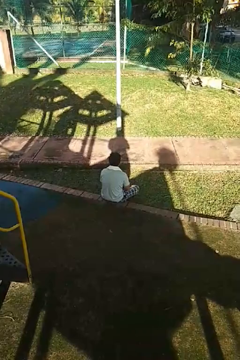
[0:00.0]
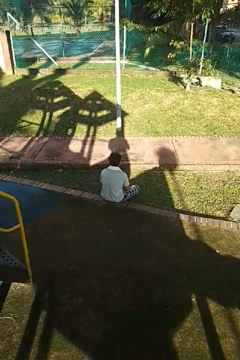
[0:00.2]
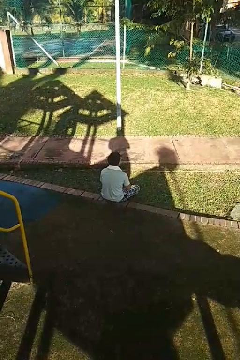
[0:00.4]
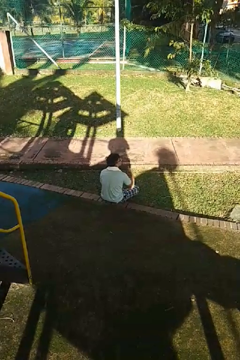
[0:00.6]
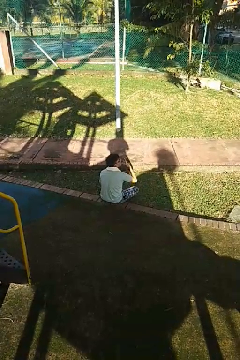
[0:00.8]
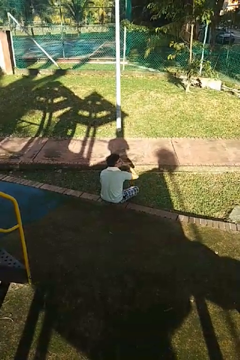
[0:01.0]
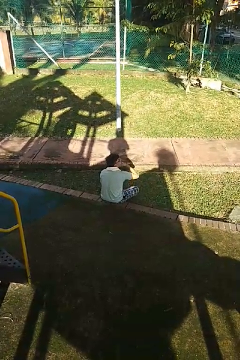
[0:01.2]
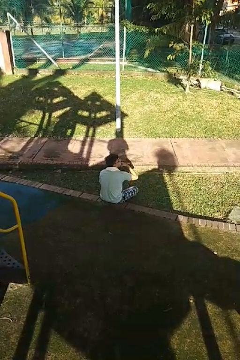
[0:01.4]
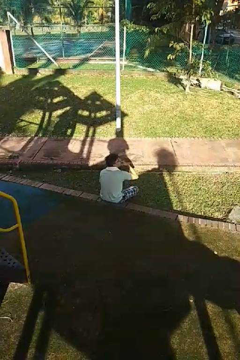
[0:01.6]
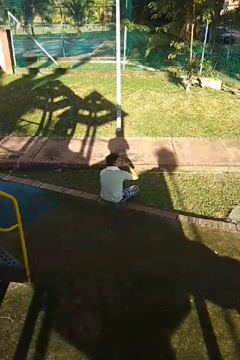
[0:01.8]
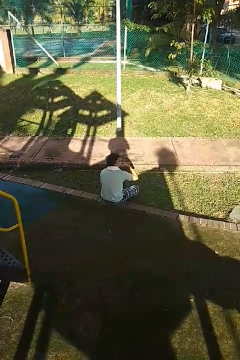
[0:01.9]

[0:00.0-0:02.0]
person strokes chin

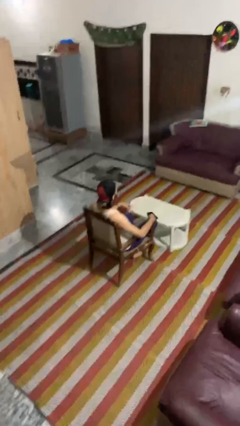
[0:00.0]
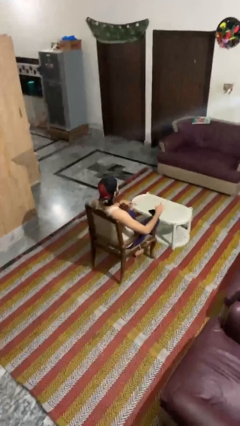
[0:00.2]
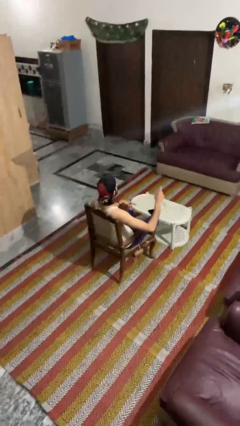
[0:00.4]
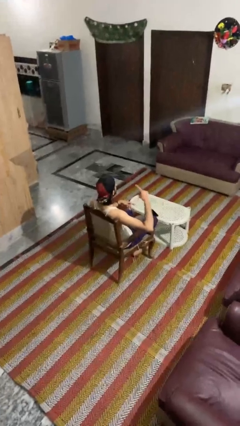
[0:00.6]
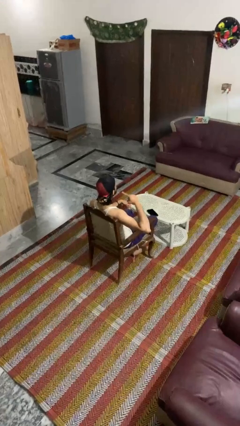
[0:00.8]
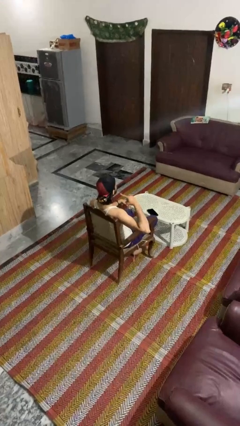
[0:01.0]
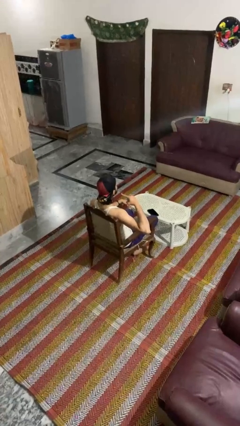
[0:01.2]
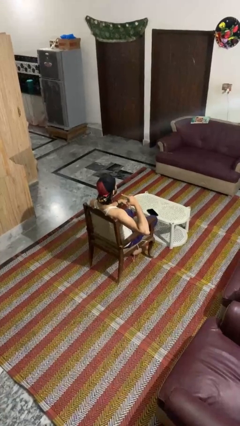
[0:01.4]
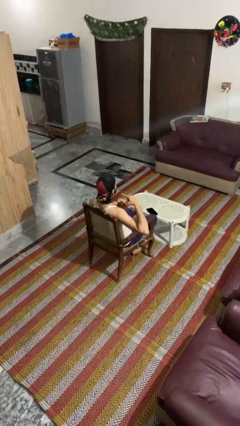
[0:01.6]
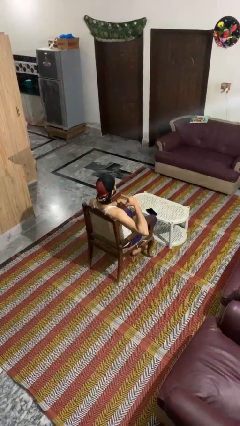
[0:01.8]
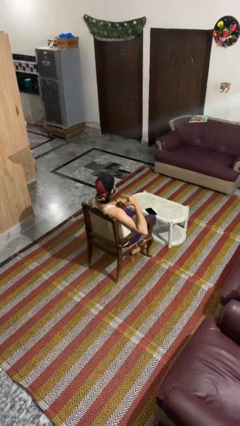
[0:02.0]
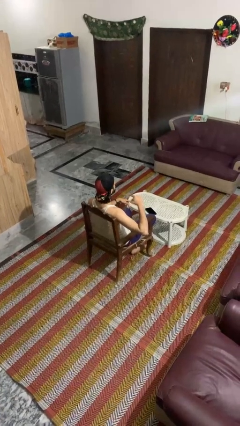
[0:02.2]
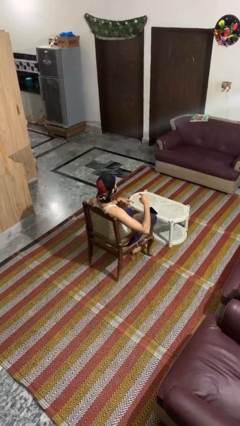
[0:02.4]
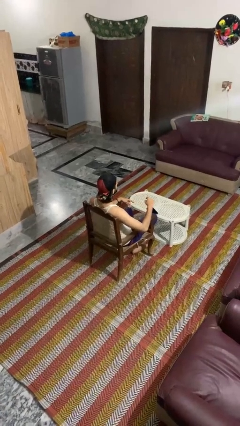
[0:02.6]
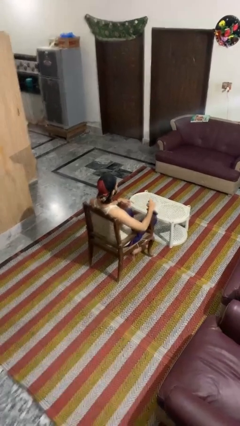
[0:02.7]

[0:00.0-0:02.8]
person gestures listen closely

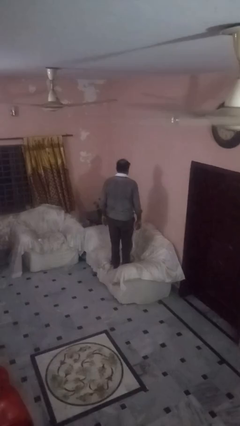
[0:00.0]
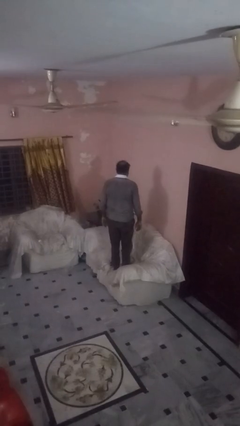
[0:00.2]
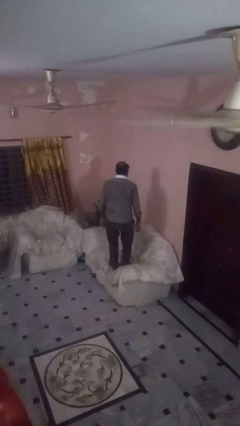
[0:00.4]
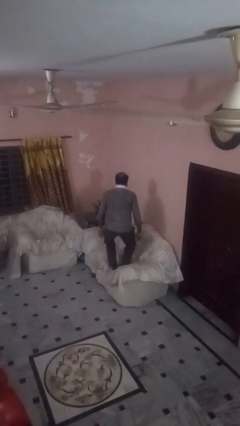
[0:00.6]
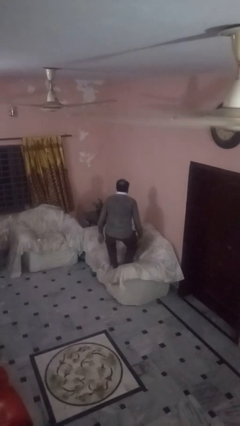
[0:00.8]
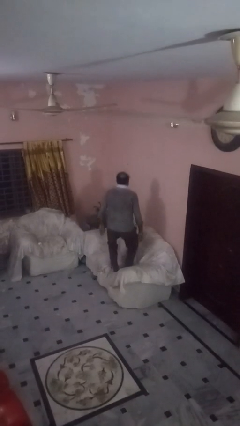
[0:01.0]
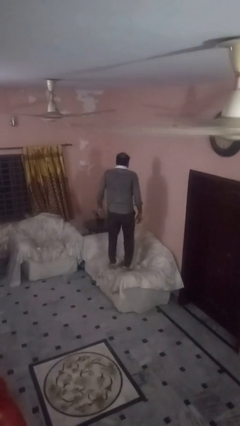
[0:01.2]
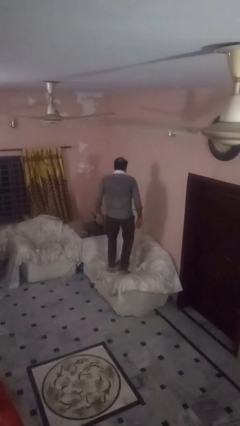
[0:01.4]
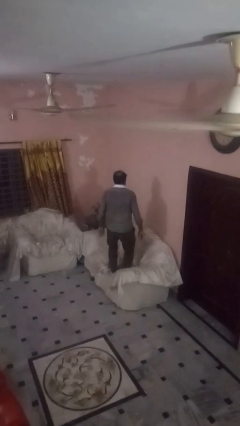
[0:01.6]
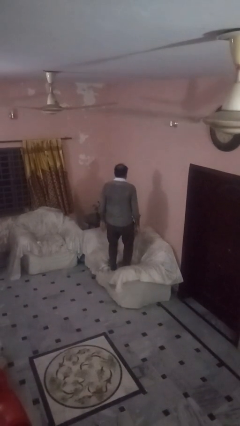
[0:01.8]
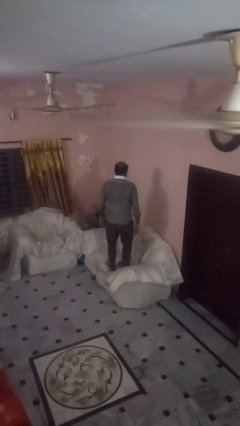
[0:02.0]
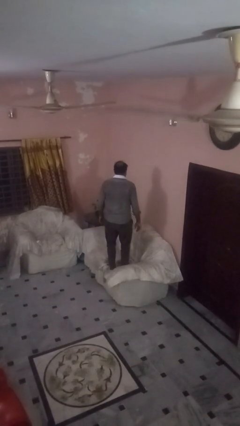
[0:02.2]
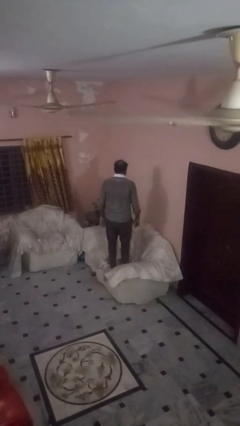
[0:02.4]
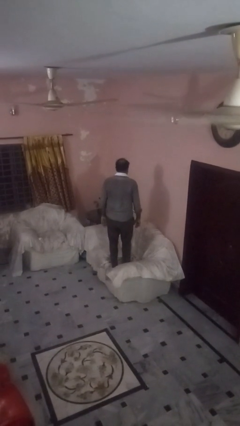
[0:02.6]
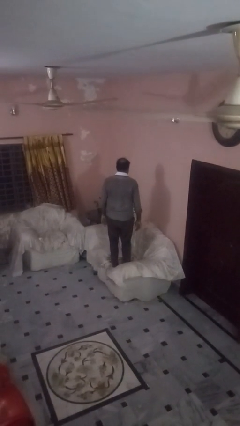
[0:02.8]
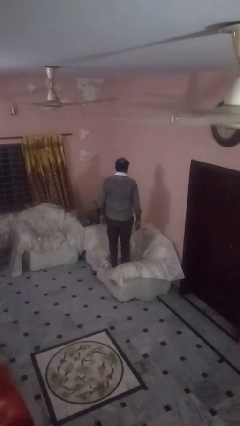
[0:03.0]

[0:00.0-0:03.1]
person jumps on couch

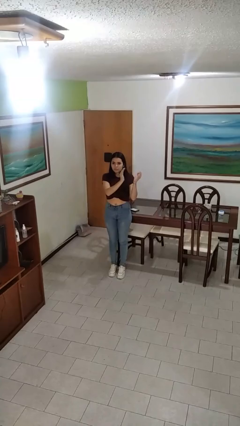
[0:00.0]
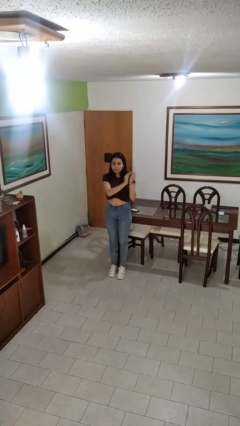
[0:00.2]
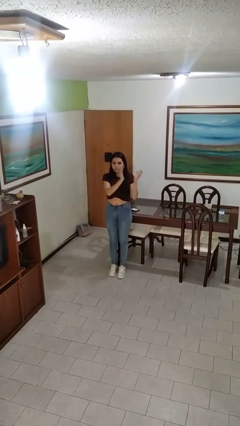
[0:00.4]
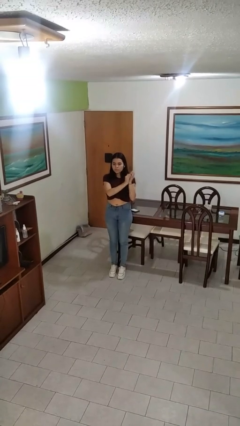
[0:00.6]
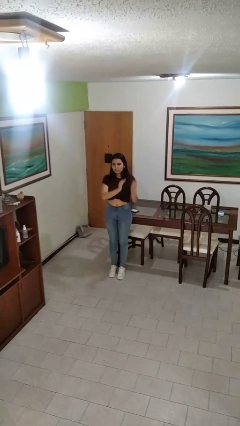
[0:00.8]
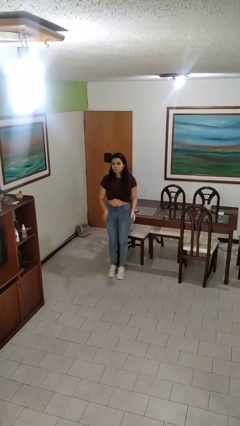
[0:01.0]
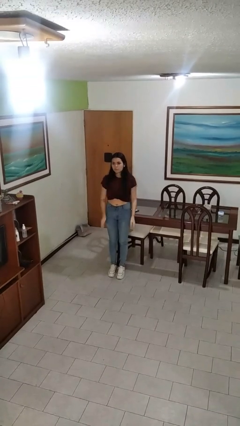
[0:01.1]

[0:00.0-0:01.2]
person claps hands

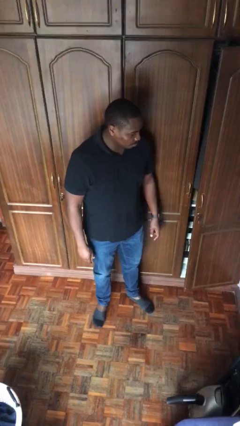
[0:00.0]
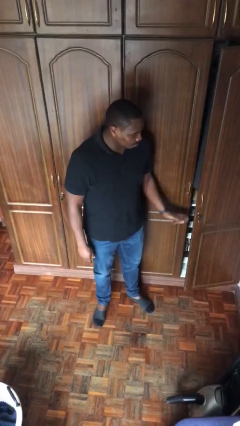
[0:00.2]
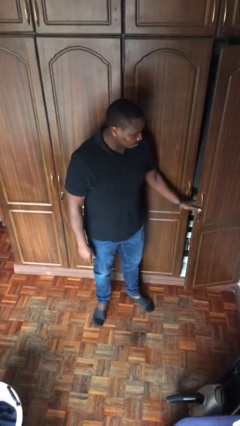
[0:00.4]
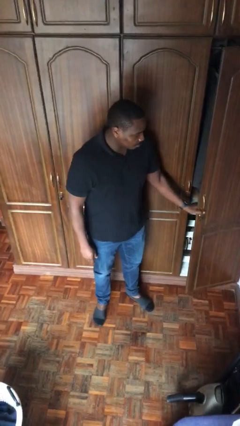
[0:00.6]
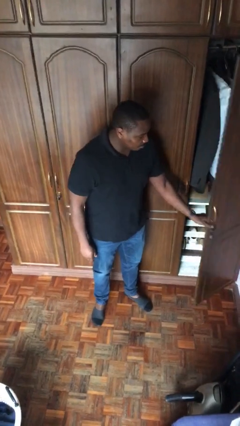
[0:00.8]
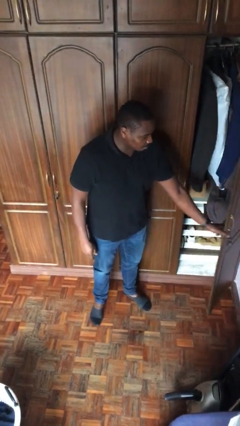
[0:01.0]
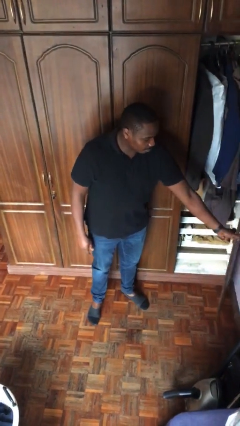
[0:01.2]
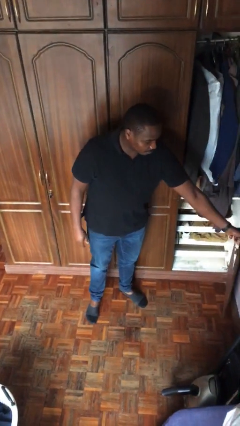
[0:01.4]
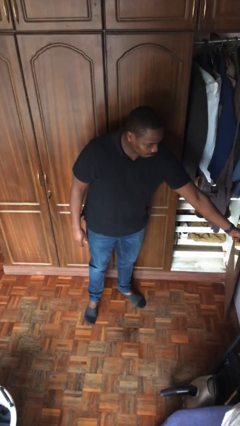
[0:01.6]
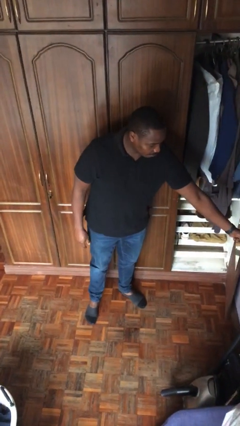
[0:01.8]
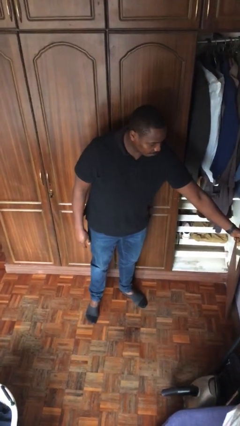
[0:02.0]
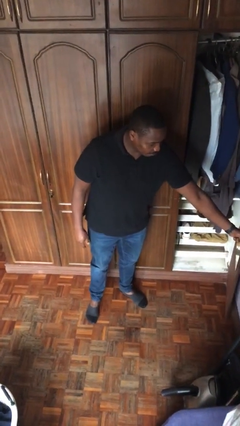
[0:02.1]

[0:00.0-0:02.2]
person opens closet door

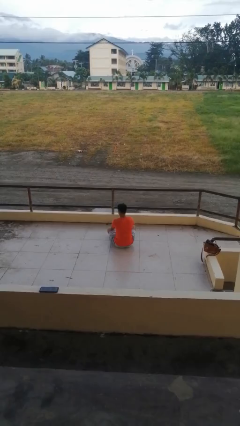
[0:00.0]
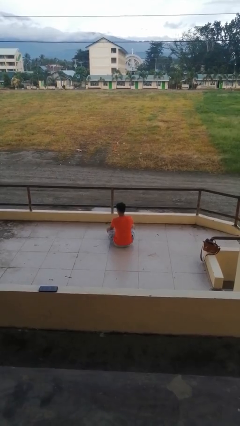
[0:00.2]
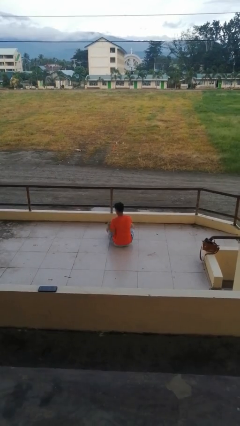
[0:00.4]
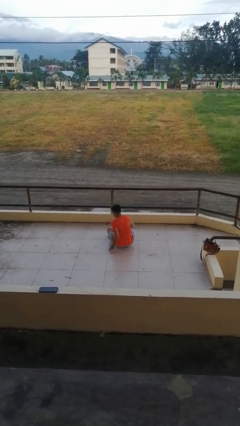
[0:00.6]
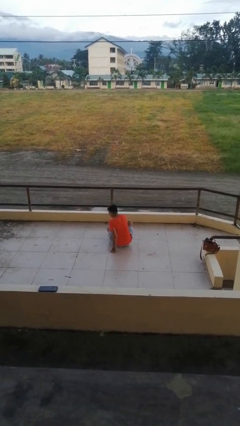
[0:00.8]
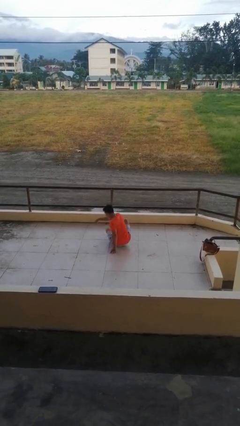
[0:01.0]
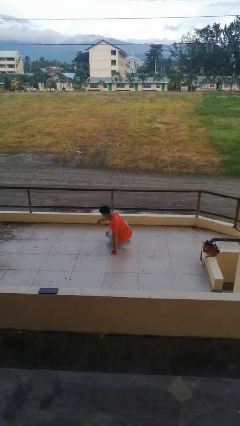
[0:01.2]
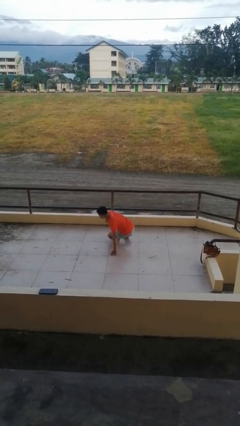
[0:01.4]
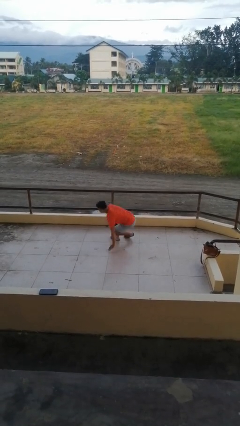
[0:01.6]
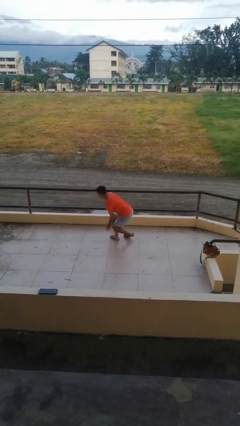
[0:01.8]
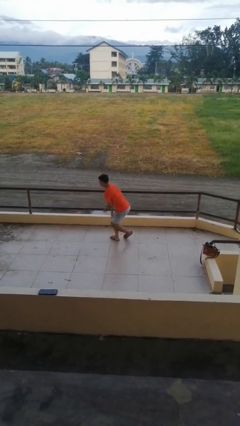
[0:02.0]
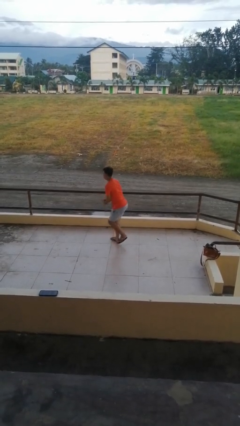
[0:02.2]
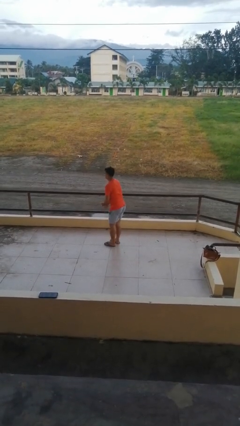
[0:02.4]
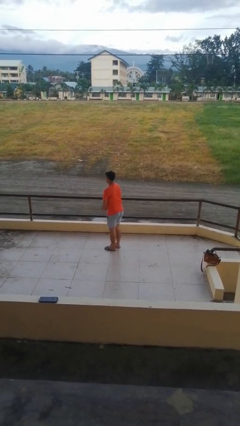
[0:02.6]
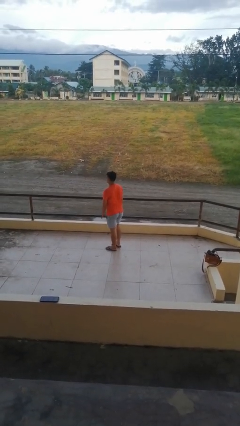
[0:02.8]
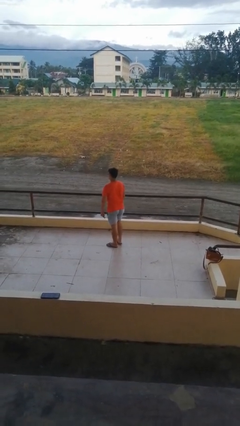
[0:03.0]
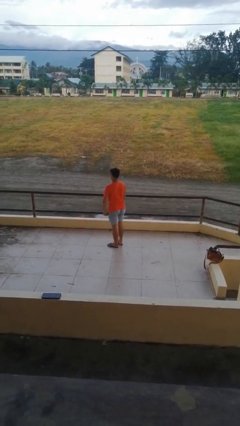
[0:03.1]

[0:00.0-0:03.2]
person stands up from floor

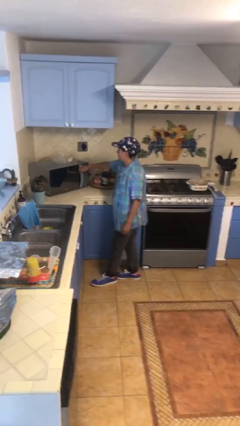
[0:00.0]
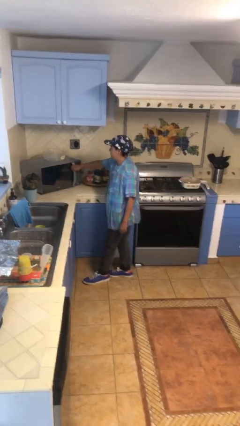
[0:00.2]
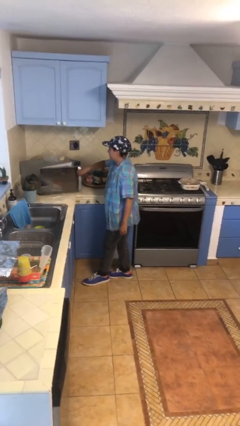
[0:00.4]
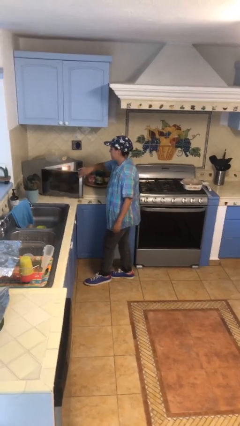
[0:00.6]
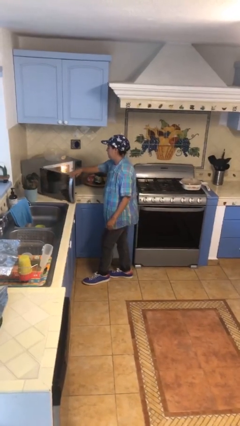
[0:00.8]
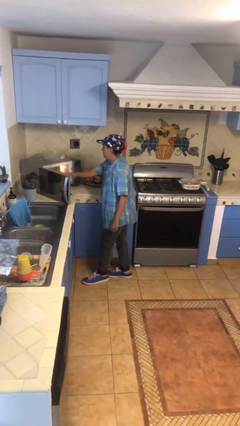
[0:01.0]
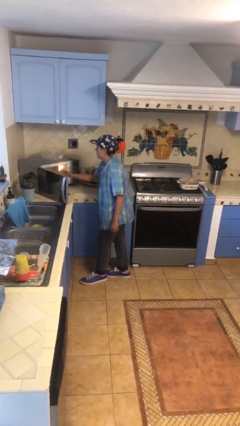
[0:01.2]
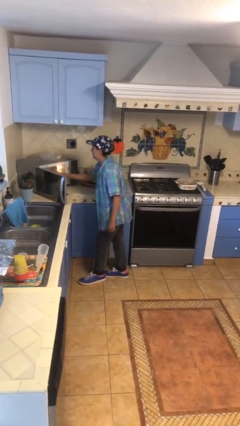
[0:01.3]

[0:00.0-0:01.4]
person opens microwave

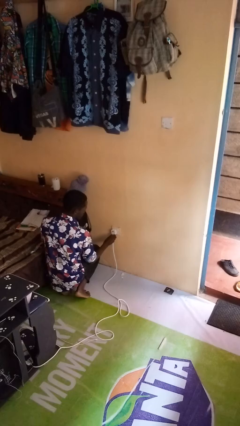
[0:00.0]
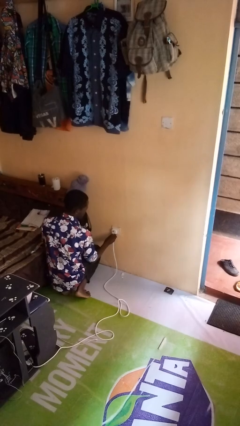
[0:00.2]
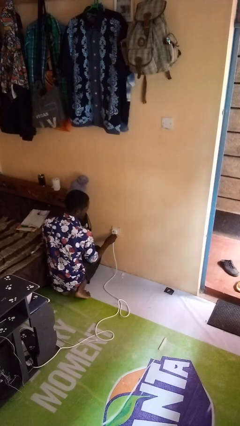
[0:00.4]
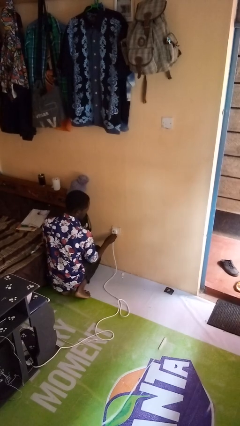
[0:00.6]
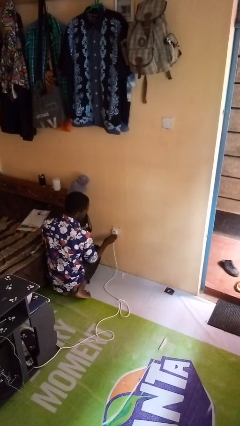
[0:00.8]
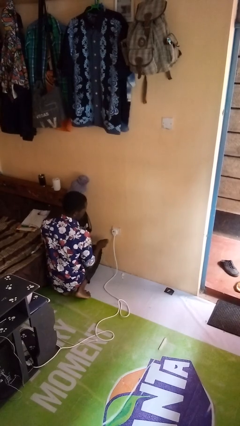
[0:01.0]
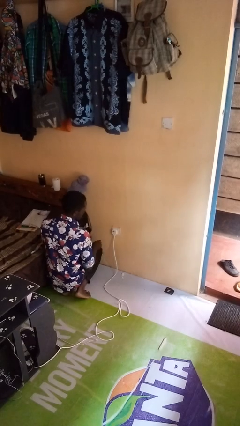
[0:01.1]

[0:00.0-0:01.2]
person plugs into electrical socket

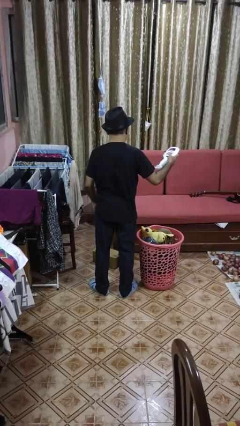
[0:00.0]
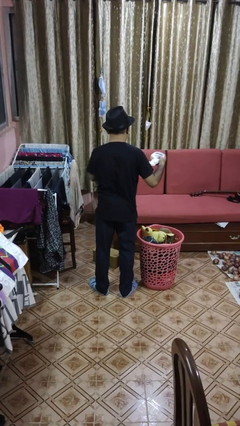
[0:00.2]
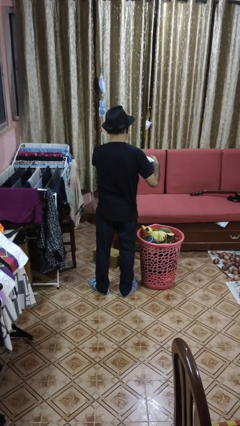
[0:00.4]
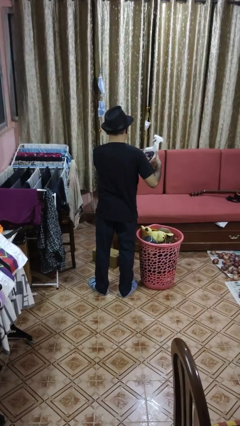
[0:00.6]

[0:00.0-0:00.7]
person takes object from basket
